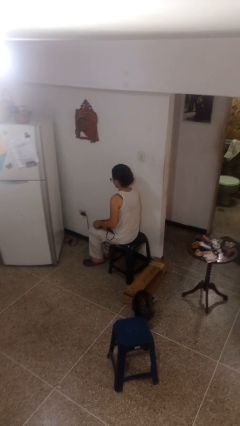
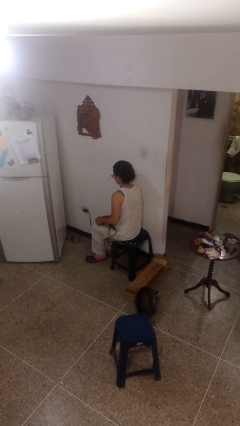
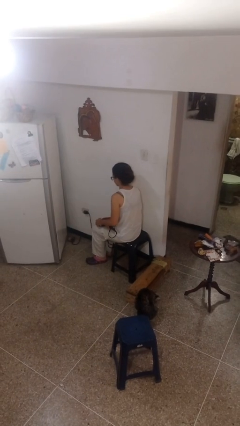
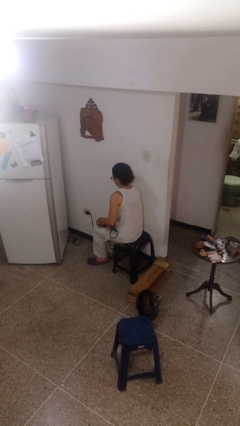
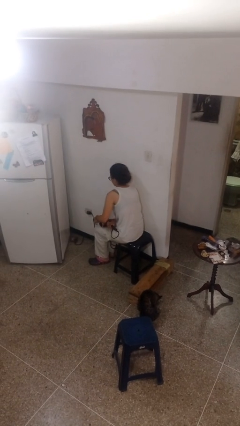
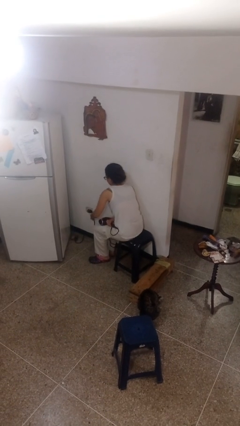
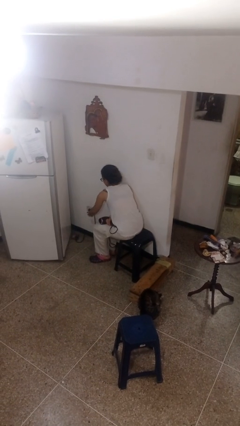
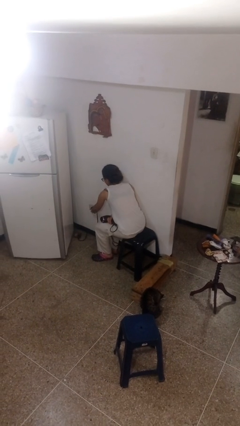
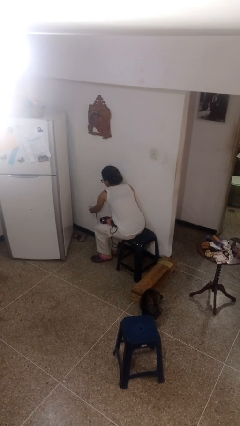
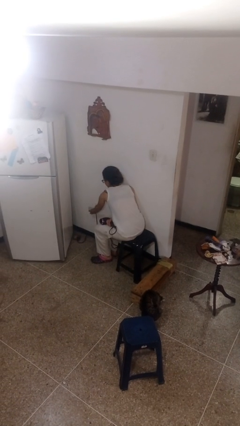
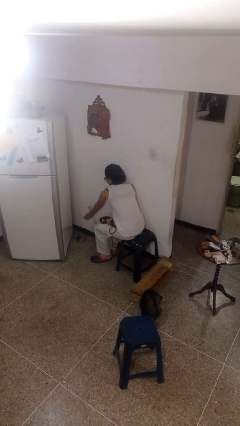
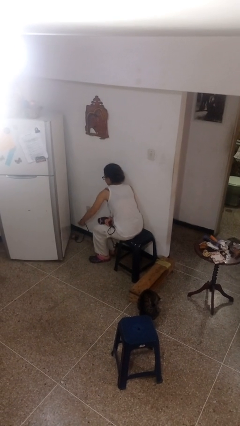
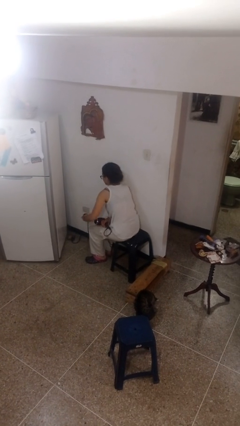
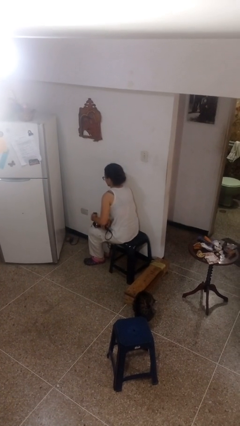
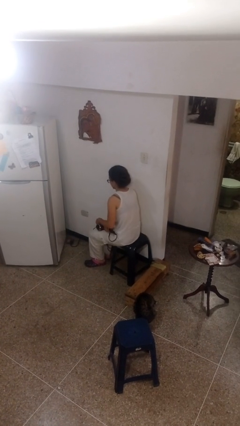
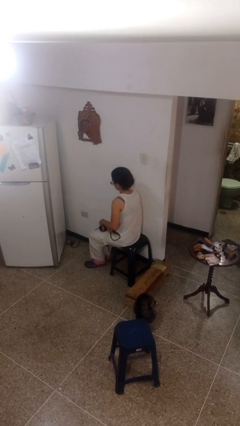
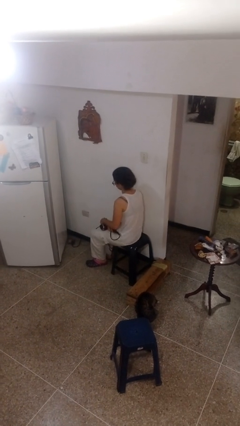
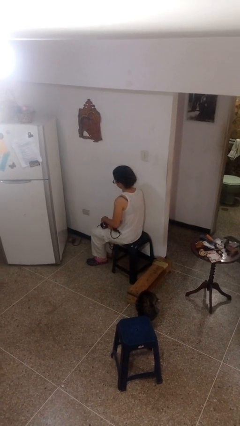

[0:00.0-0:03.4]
person unplugs from electrical socket

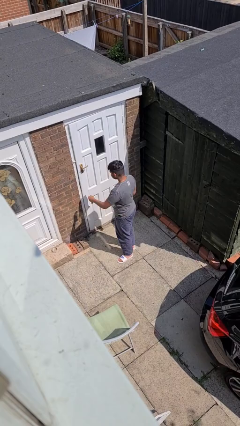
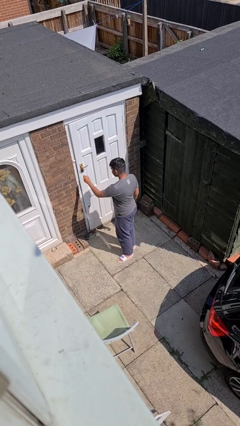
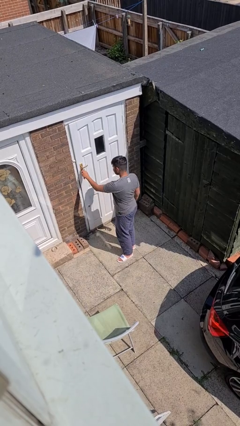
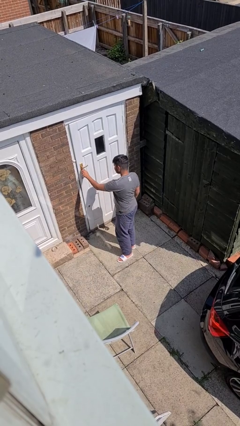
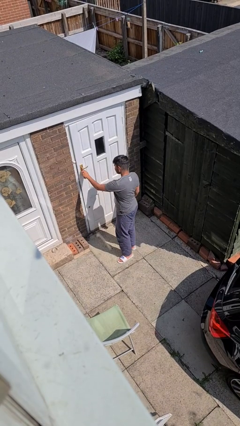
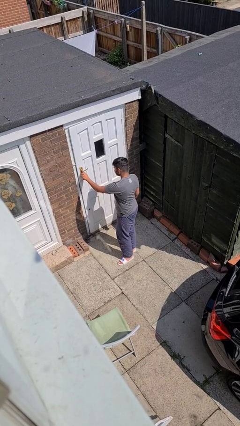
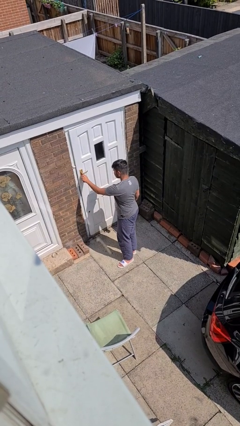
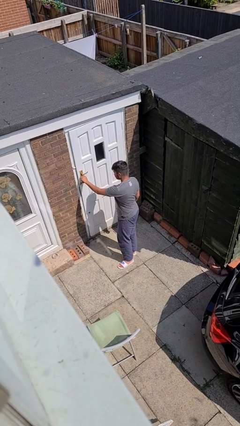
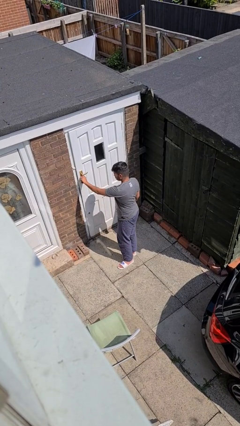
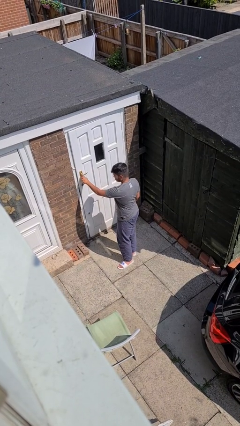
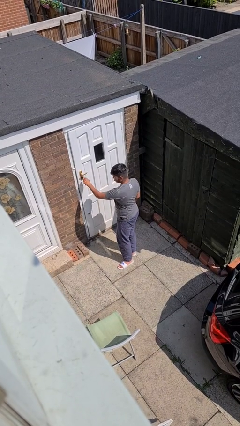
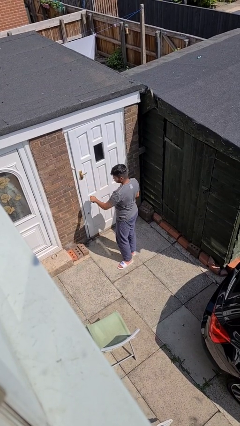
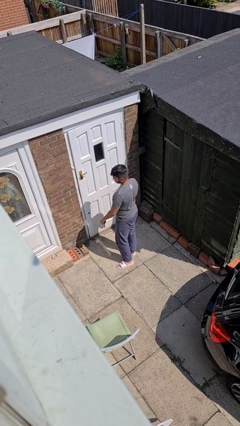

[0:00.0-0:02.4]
person unlocks door with keys

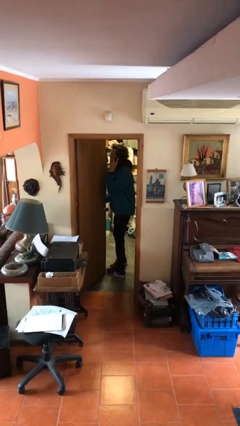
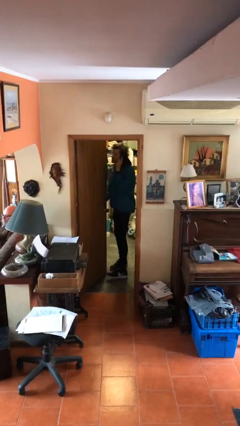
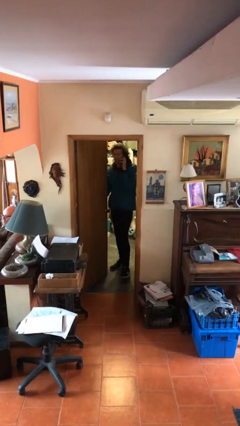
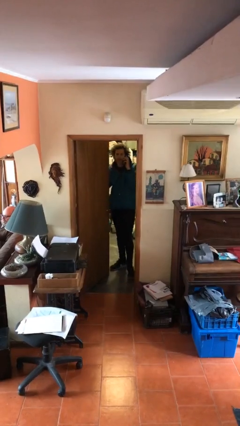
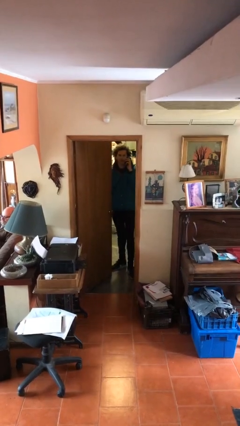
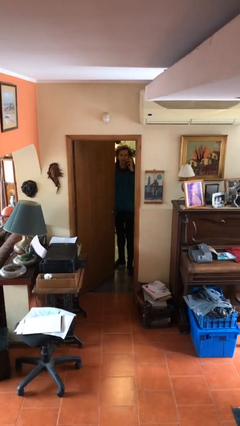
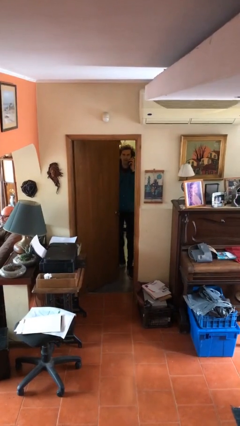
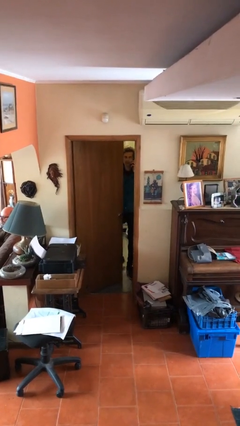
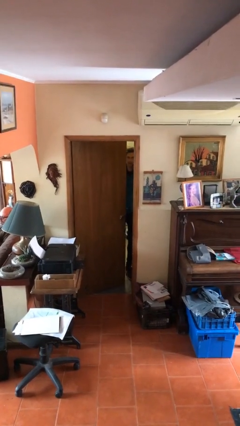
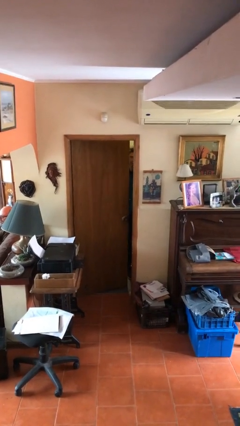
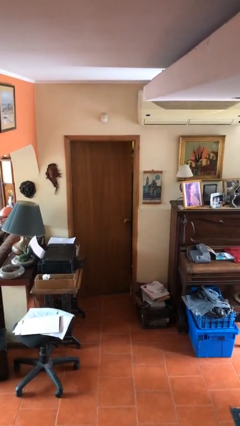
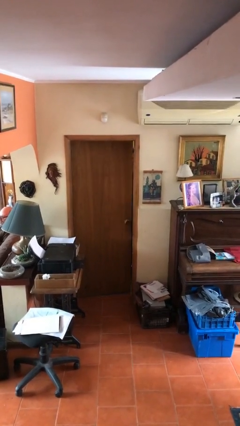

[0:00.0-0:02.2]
person closes facility door

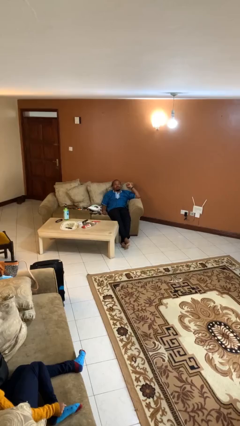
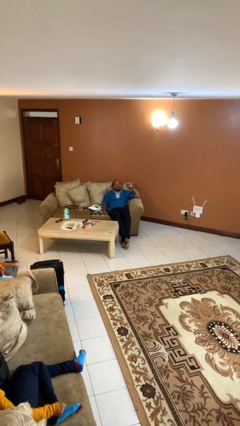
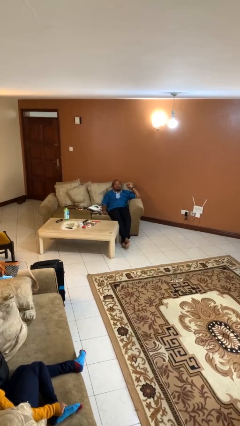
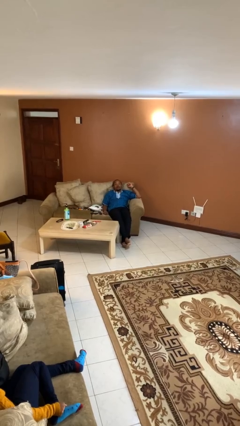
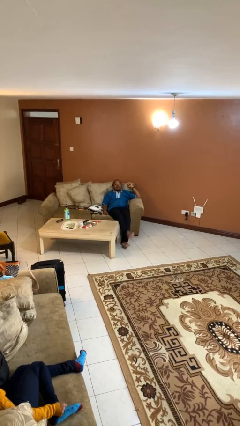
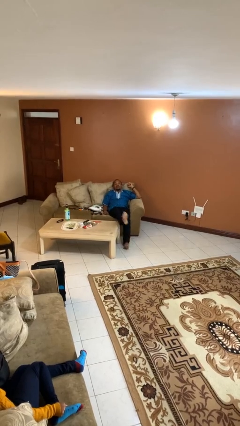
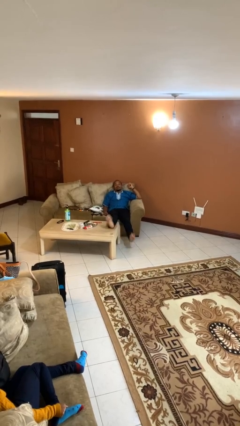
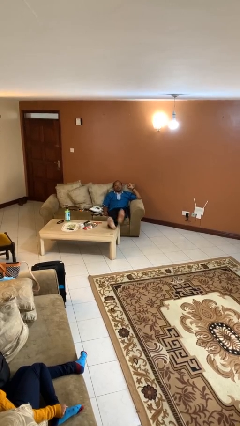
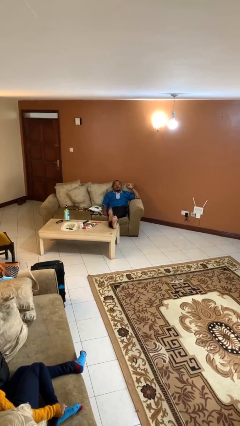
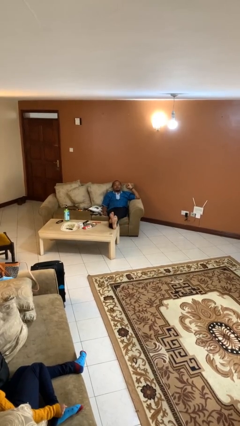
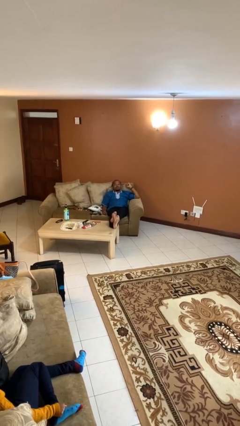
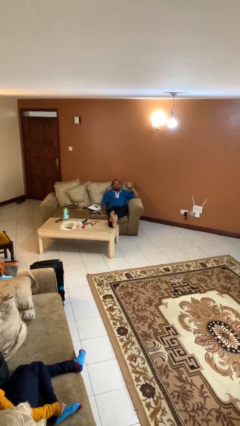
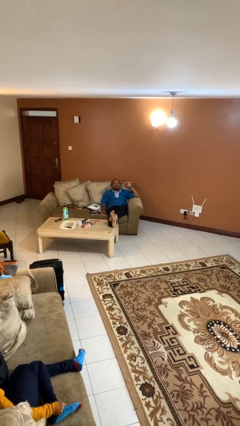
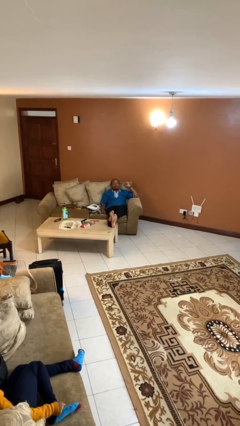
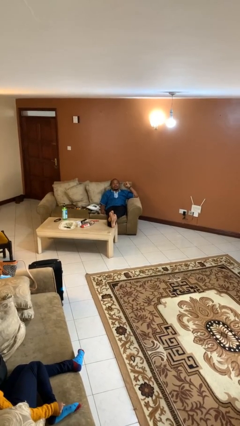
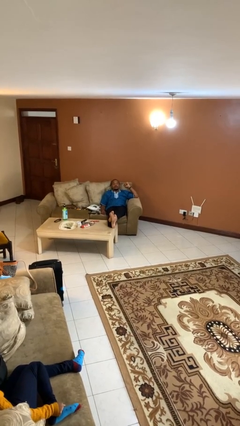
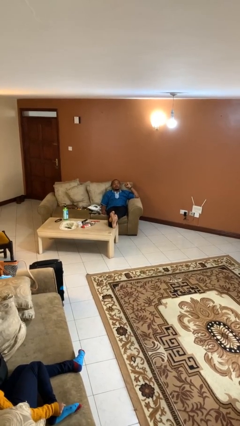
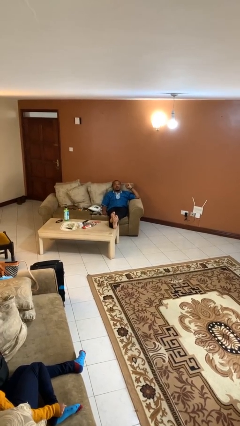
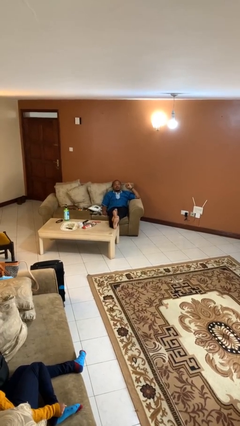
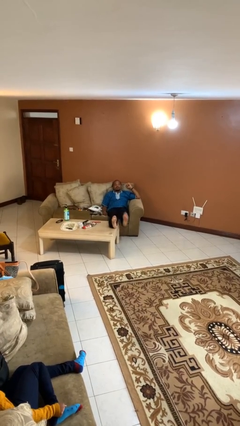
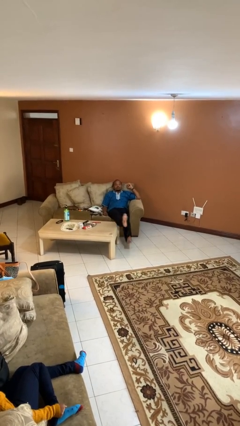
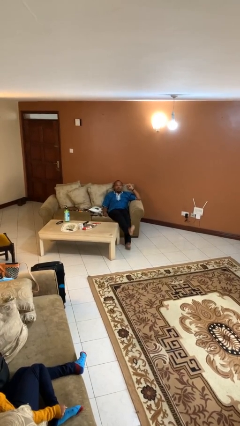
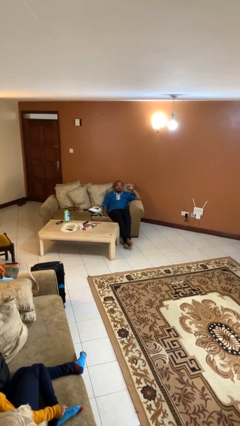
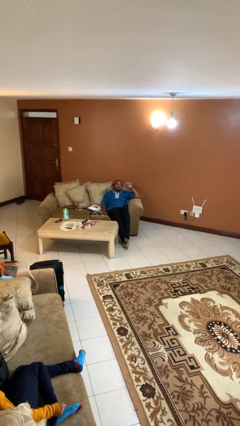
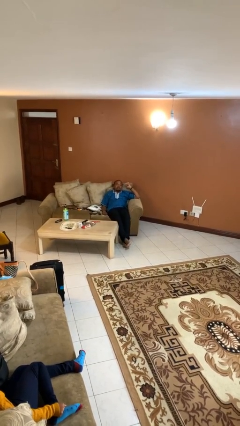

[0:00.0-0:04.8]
person puts feet up

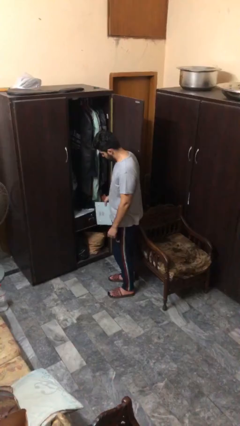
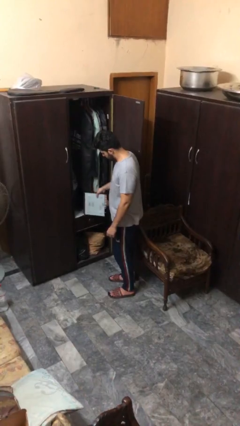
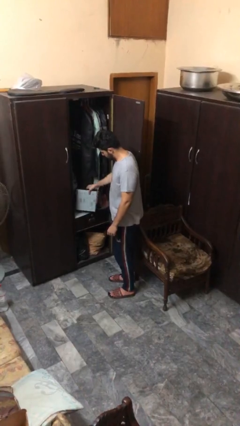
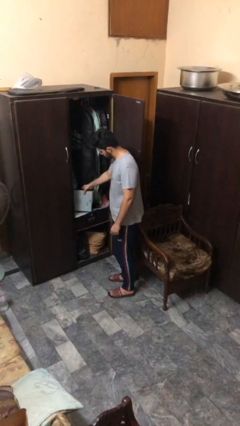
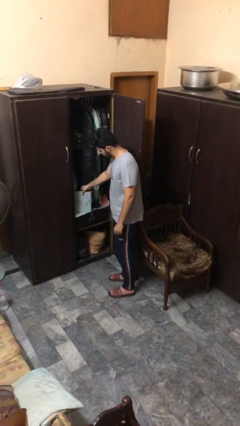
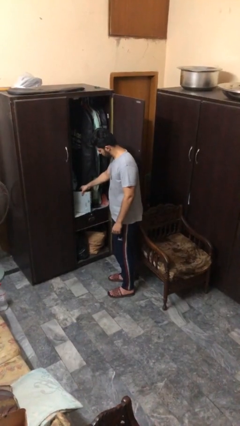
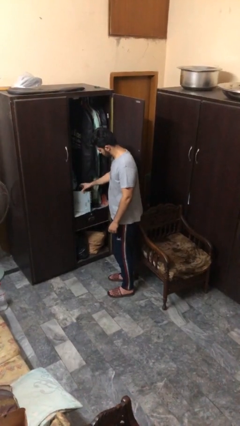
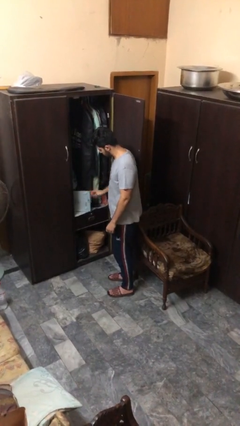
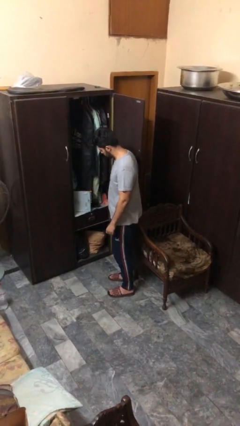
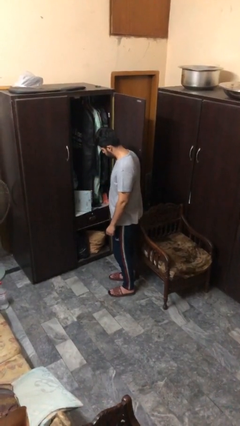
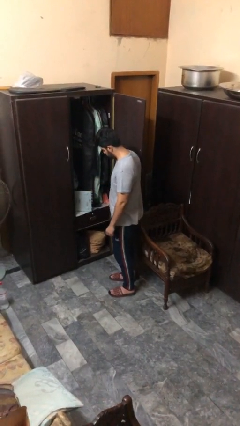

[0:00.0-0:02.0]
person puts down object into cabinet

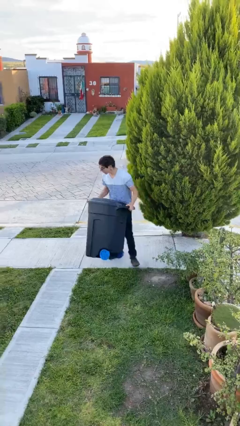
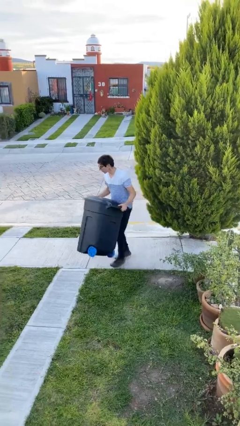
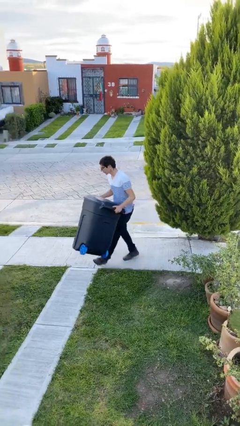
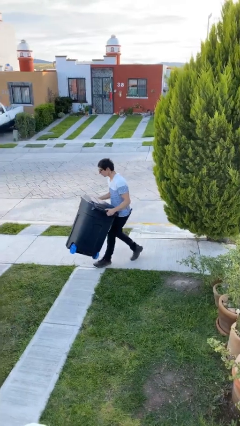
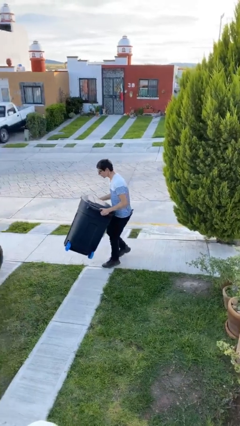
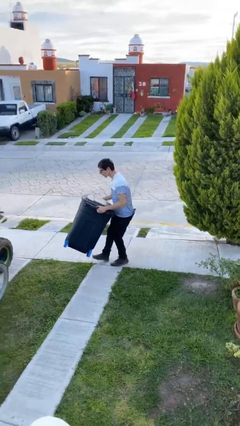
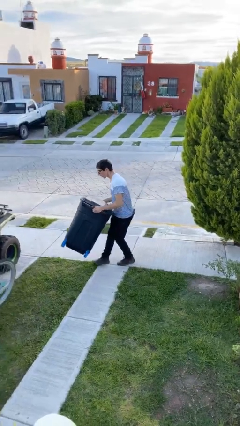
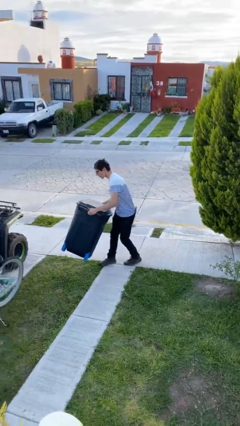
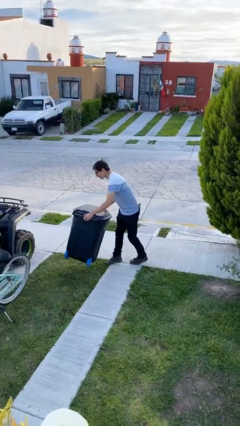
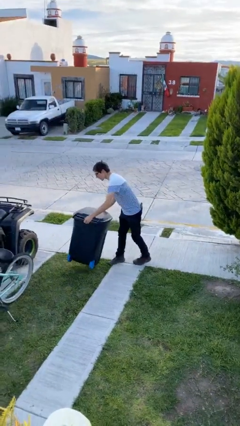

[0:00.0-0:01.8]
person carries heavy object

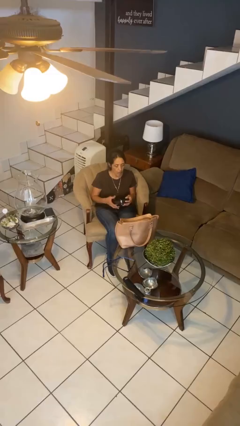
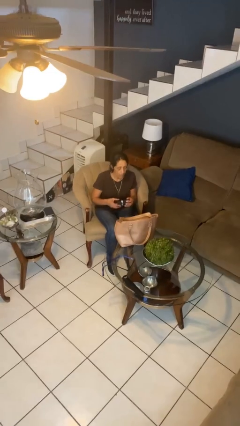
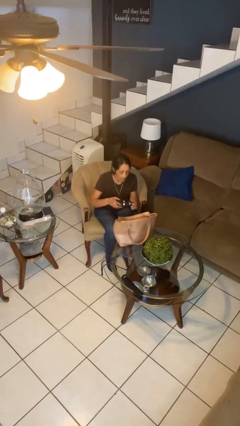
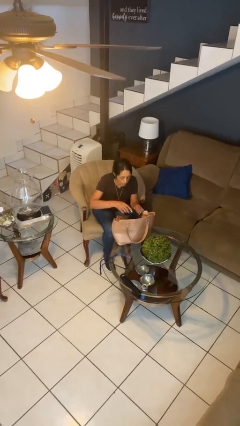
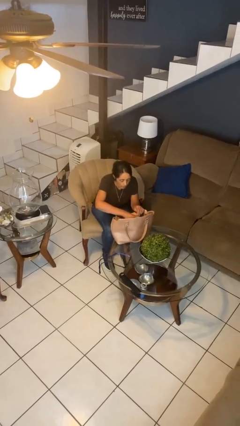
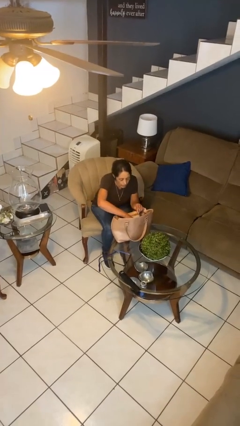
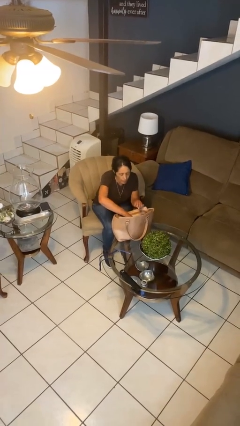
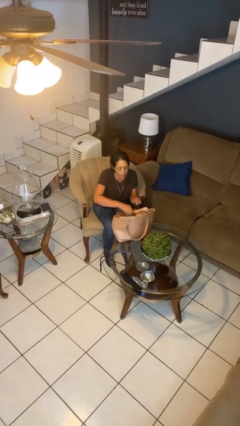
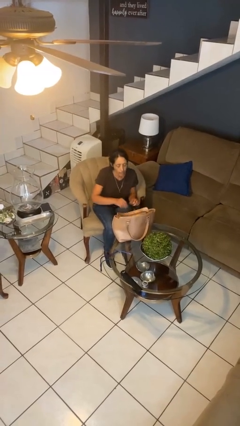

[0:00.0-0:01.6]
person puts object into purse
